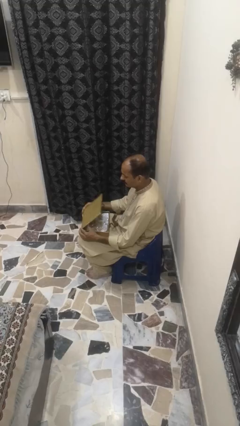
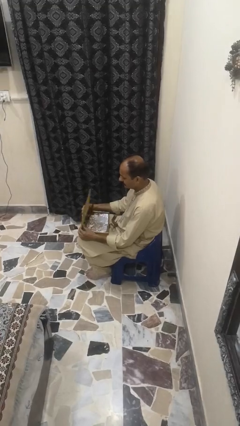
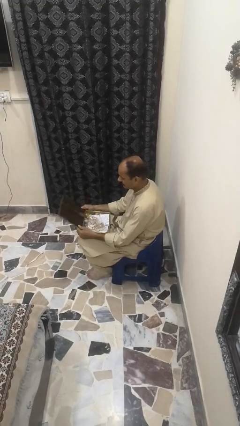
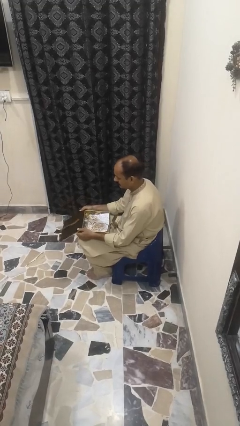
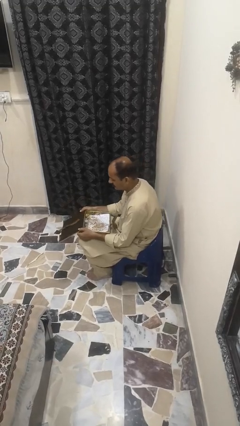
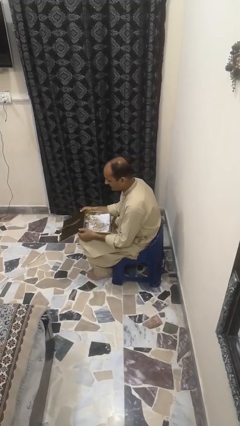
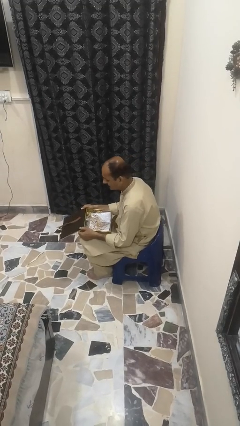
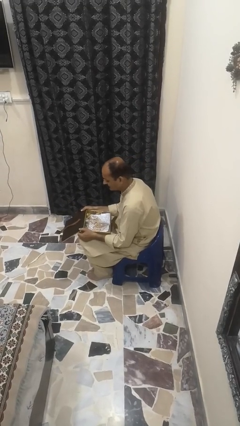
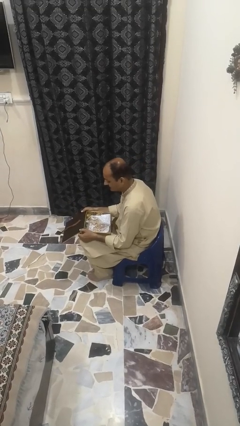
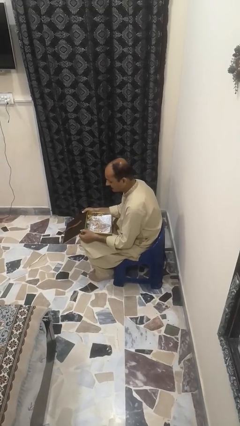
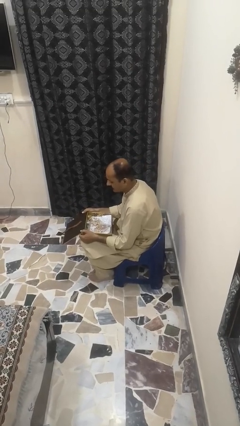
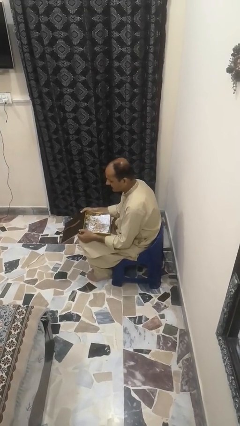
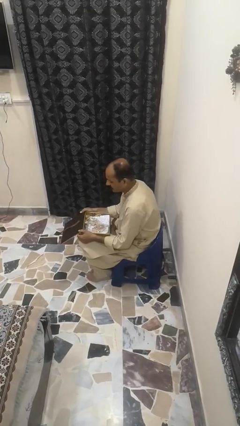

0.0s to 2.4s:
person opens jewelry box

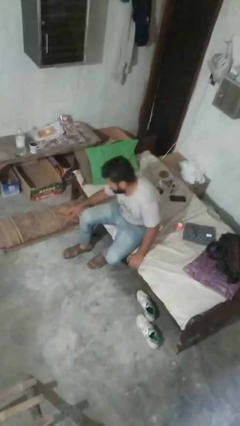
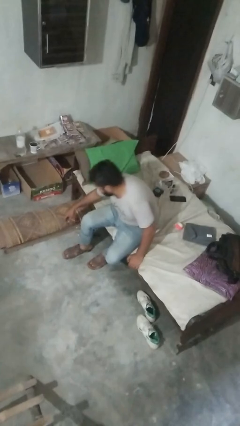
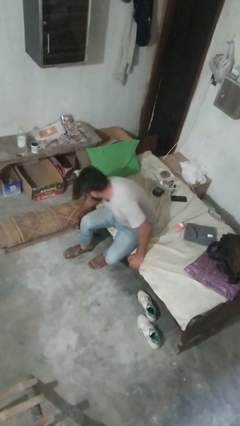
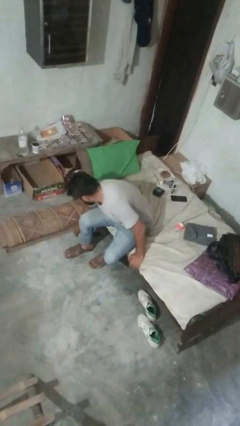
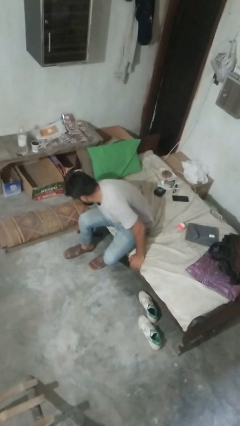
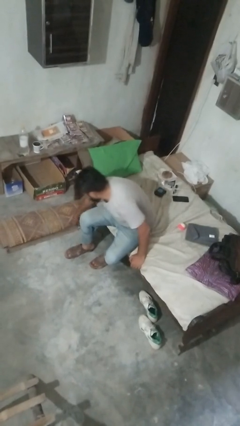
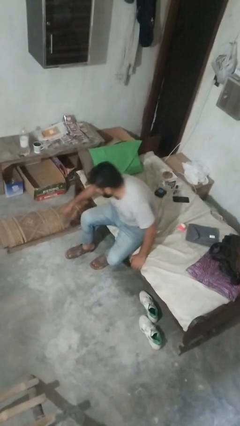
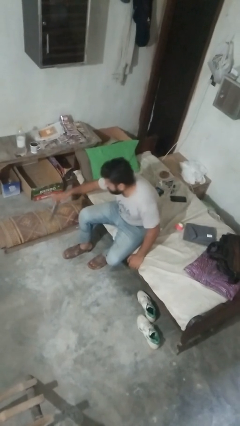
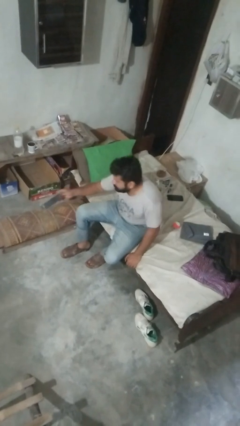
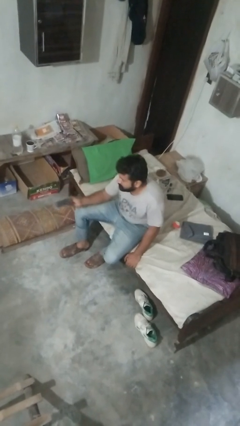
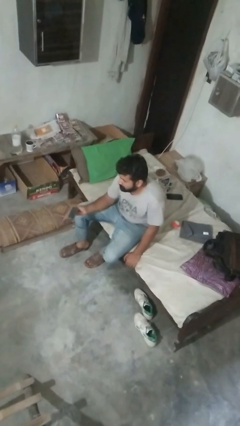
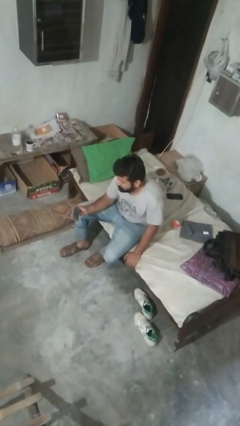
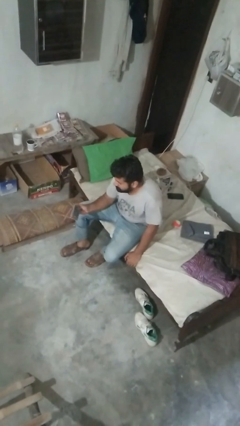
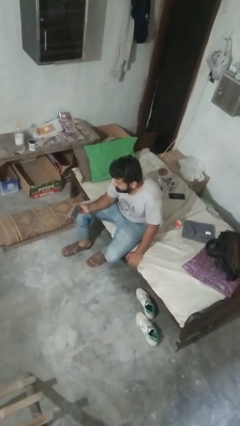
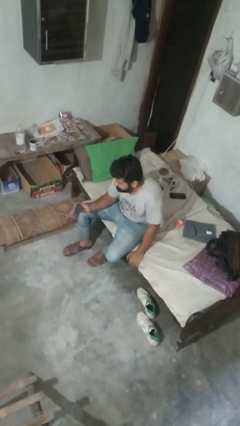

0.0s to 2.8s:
person searches under couch

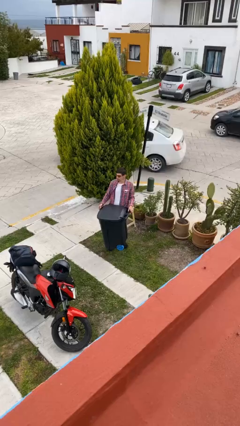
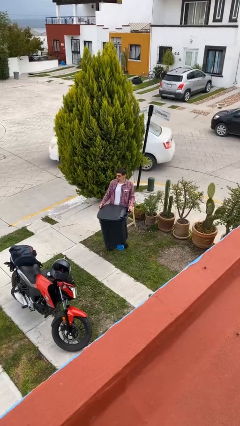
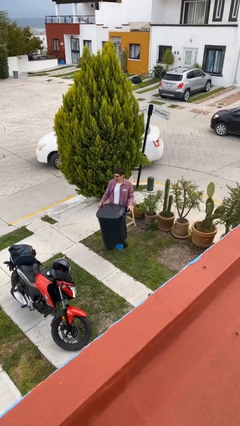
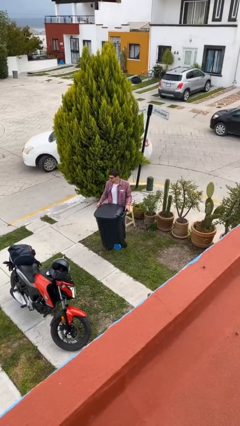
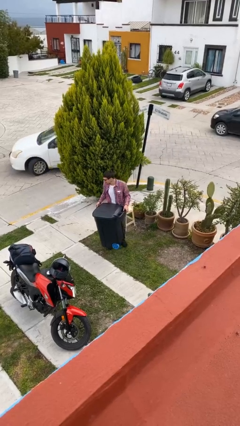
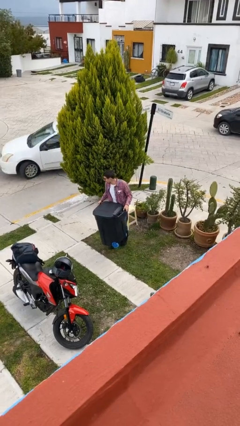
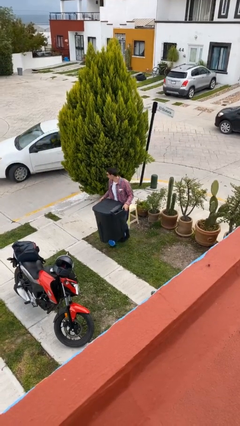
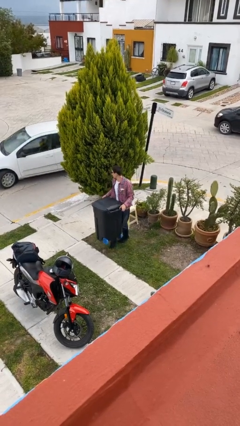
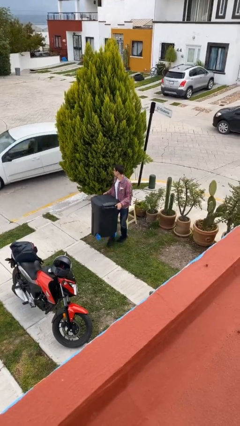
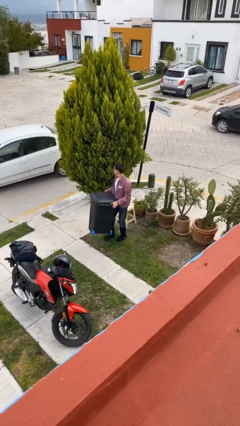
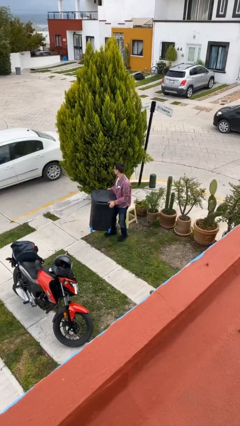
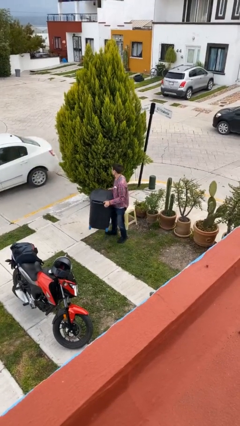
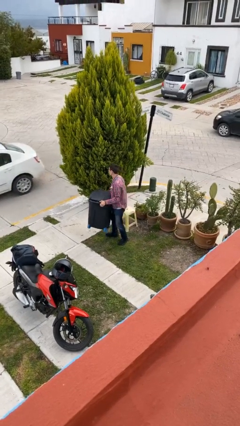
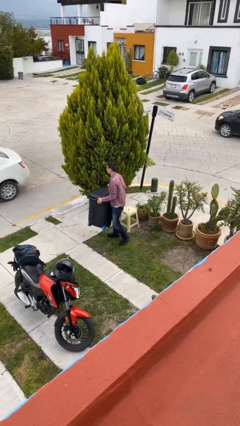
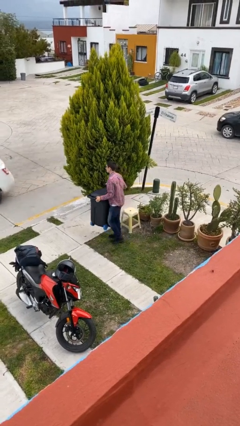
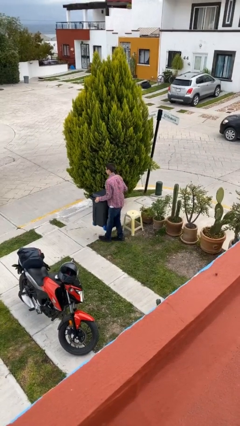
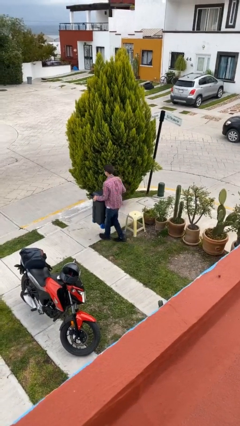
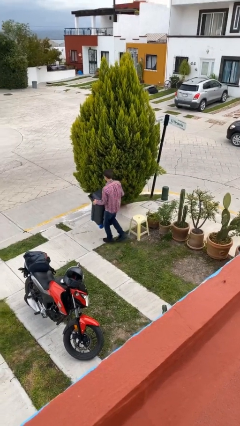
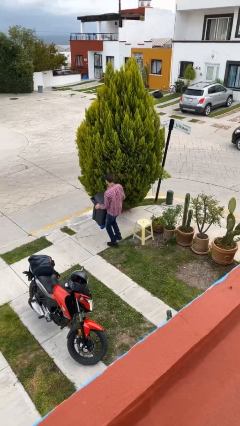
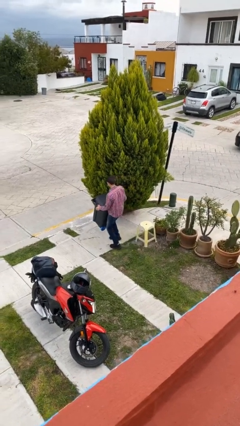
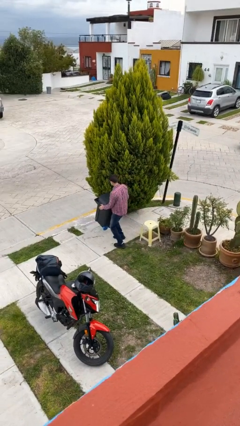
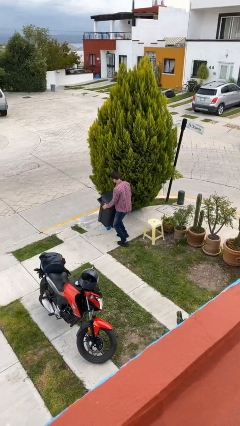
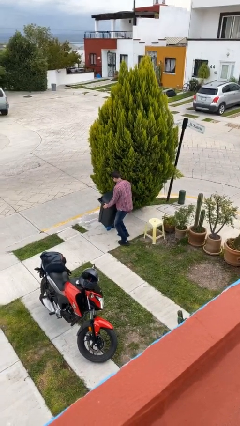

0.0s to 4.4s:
person carries heavy object

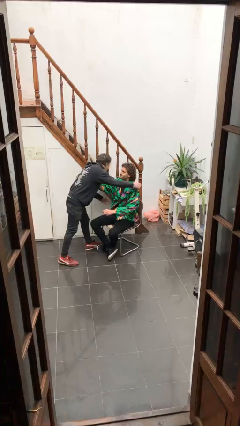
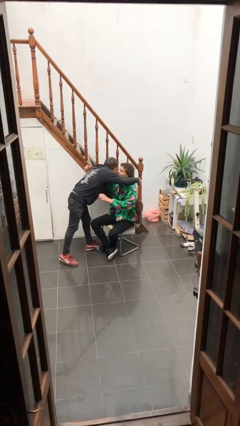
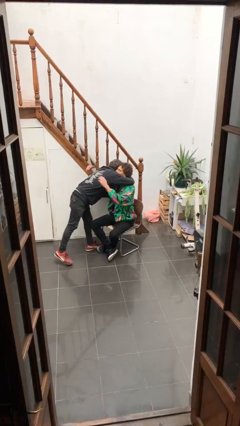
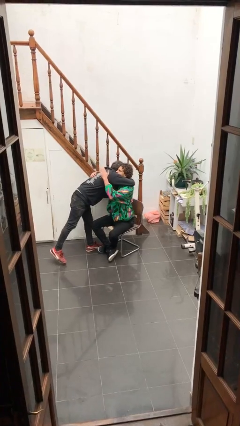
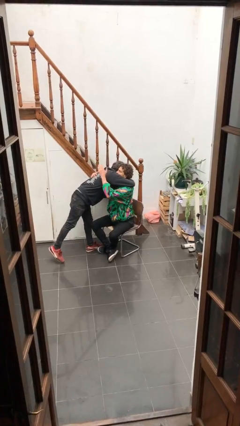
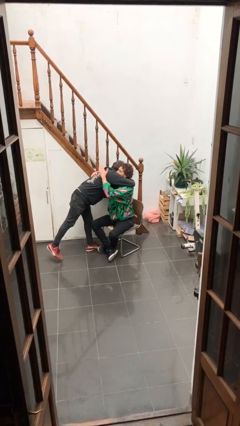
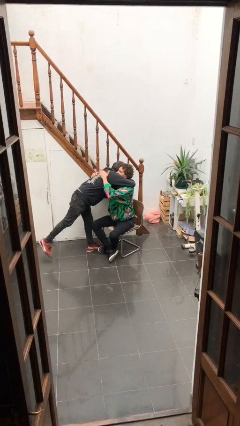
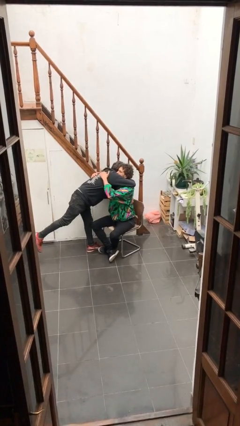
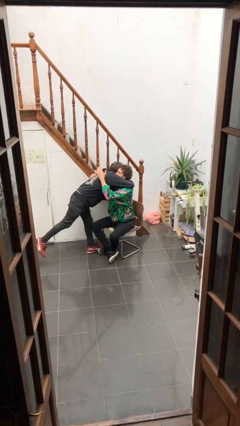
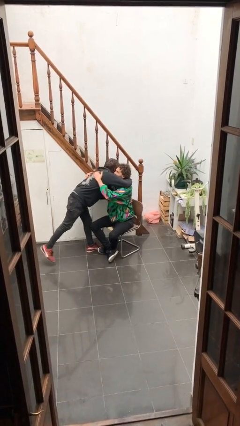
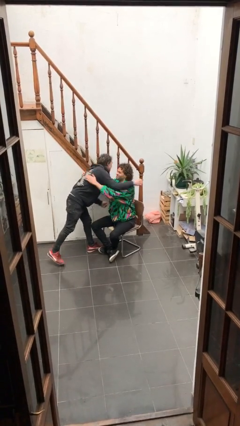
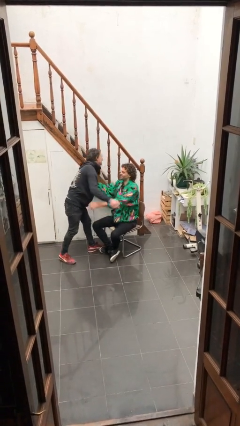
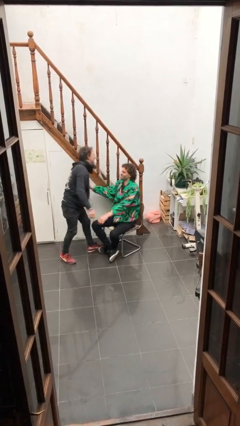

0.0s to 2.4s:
person embraces person

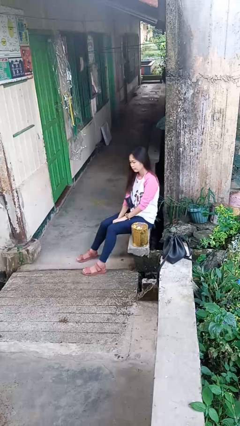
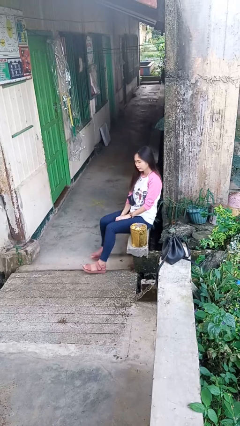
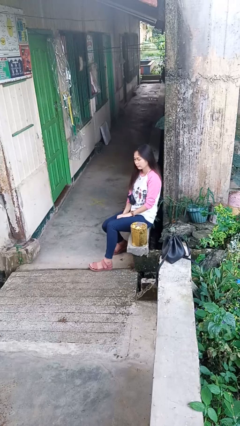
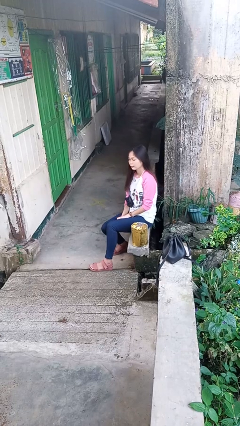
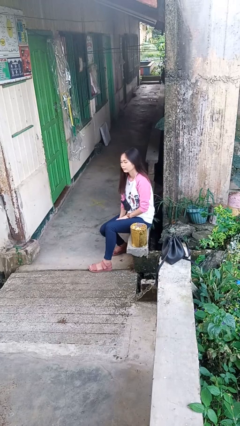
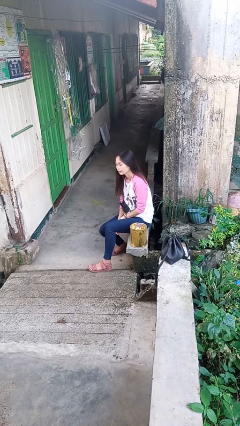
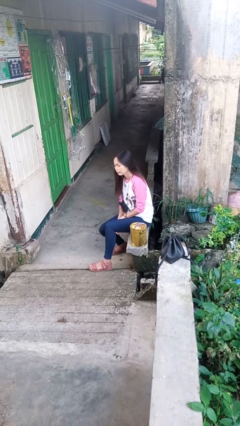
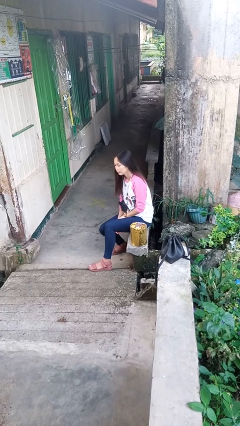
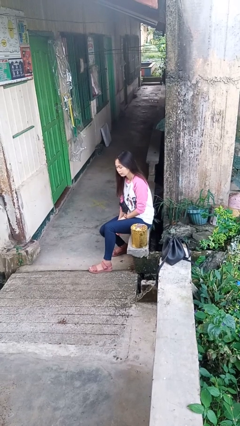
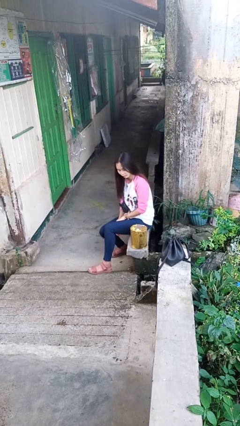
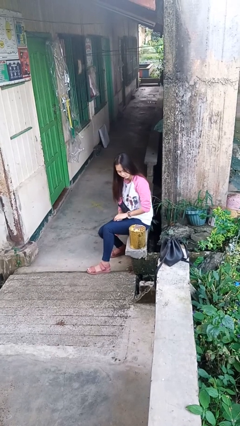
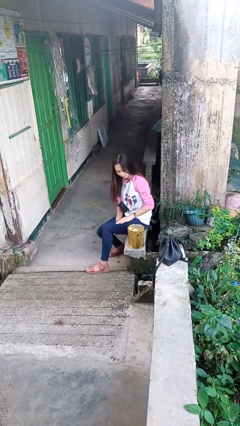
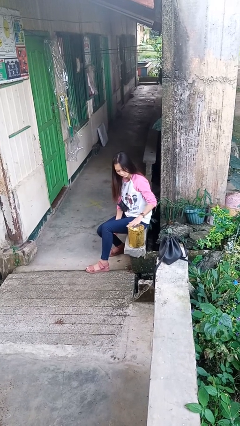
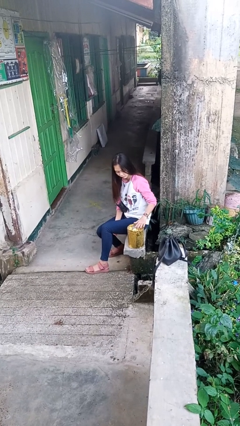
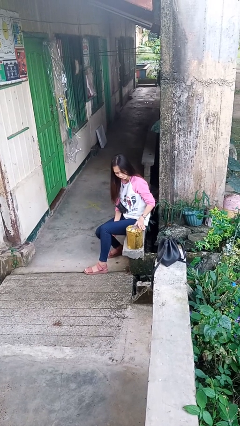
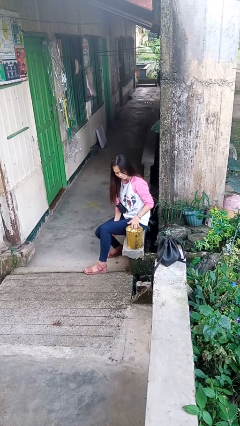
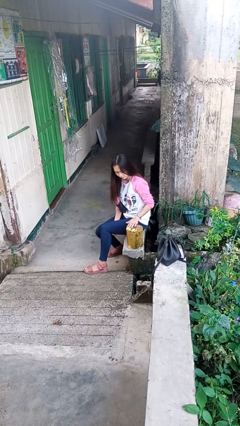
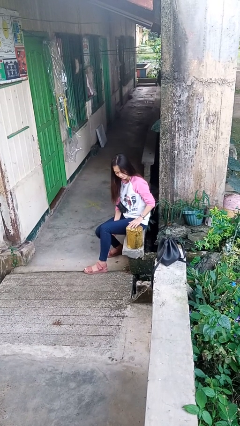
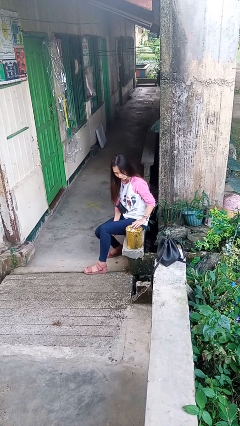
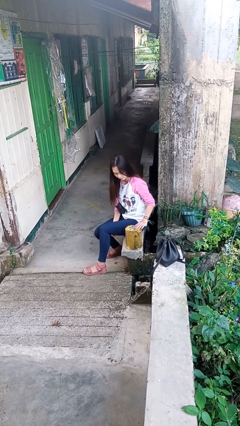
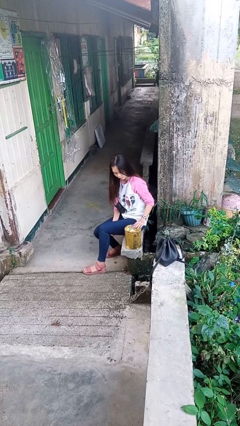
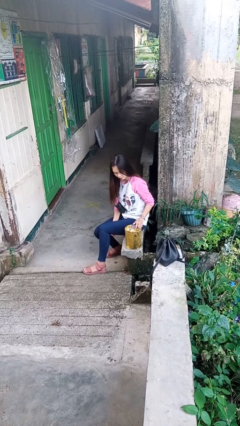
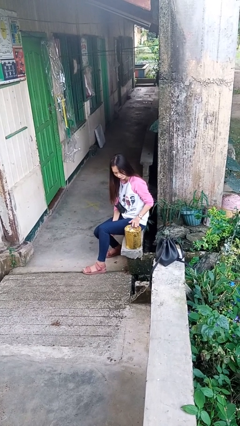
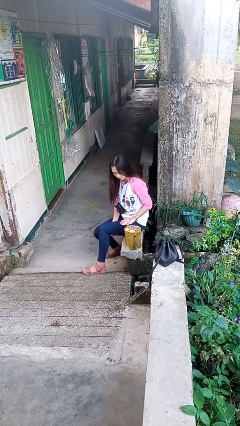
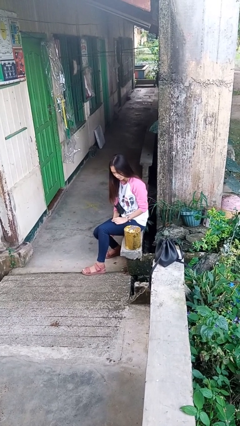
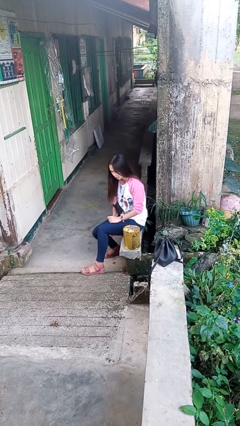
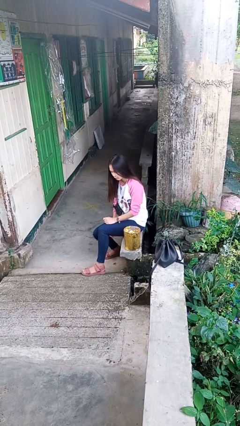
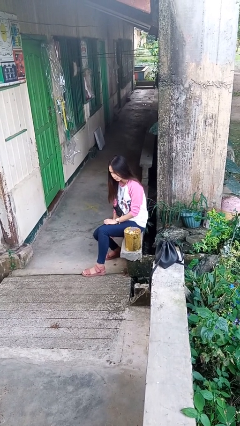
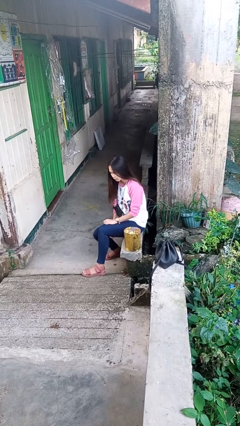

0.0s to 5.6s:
person waves hand over object
